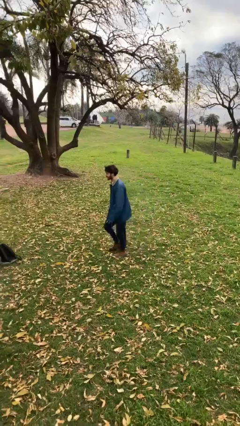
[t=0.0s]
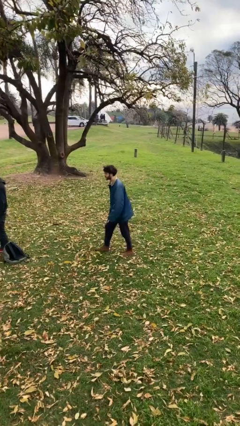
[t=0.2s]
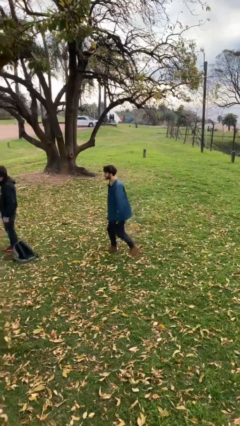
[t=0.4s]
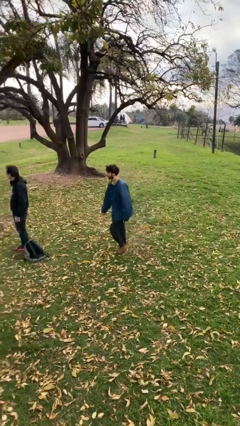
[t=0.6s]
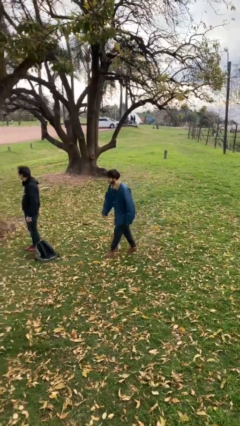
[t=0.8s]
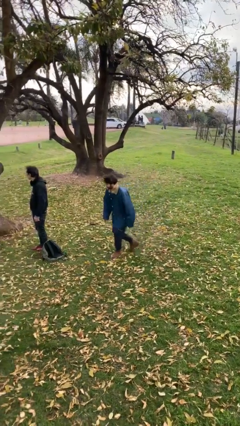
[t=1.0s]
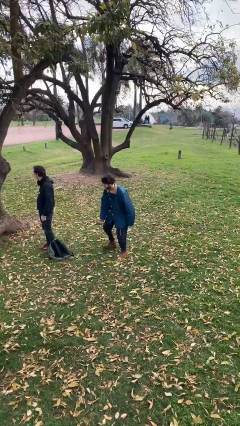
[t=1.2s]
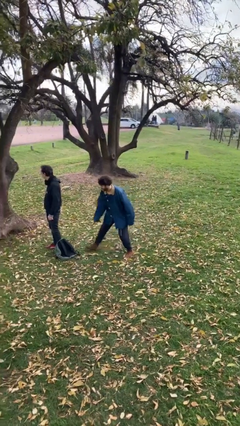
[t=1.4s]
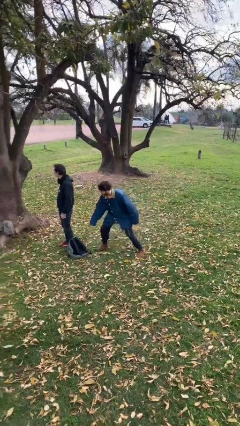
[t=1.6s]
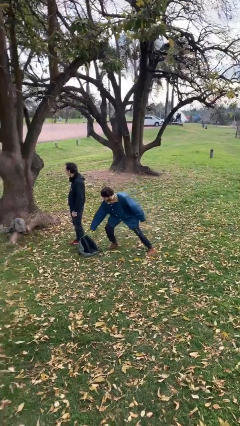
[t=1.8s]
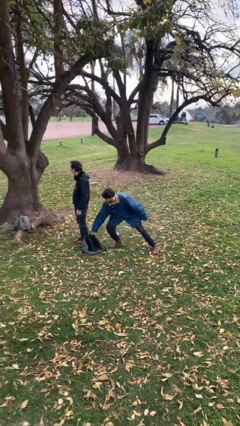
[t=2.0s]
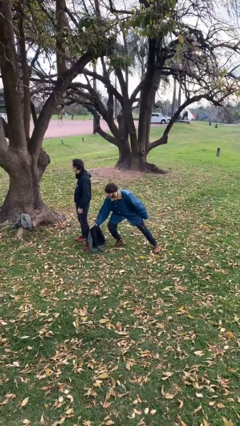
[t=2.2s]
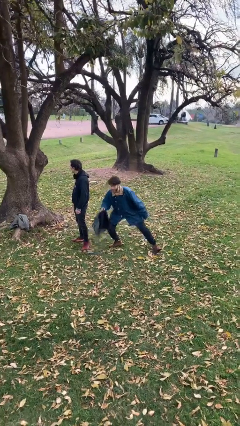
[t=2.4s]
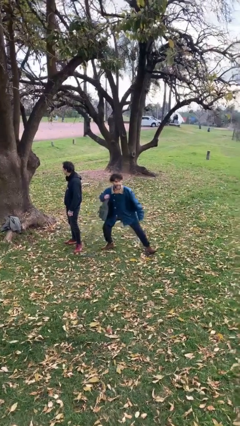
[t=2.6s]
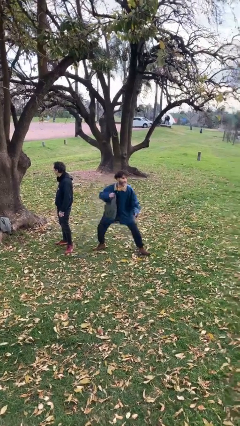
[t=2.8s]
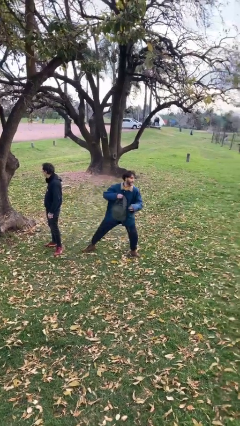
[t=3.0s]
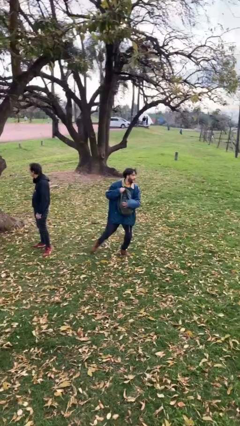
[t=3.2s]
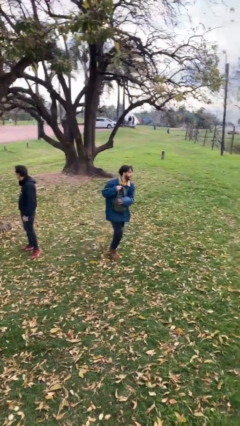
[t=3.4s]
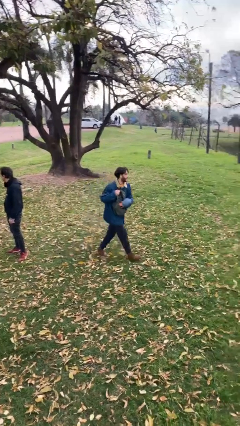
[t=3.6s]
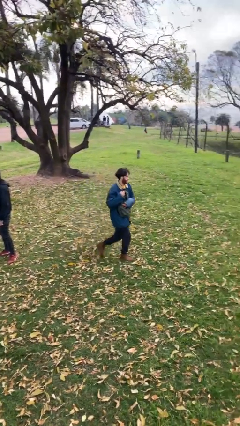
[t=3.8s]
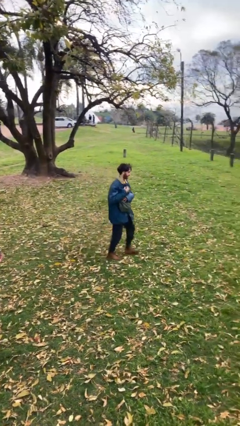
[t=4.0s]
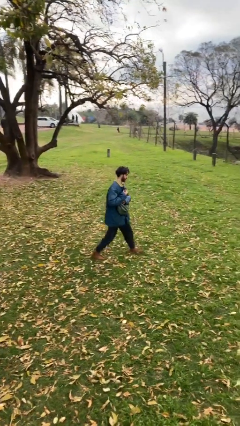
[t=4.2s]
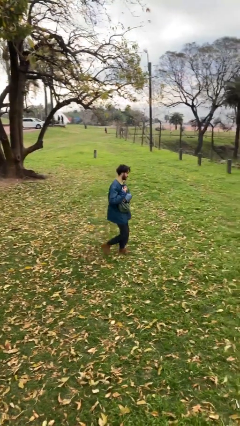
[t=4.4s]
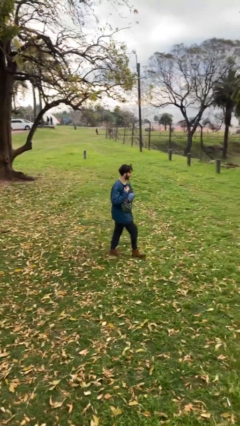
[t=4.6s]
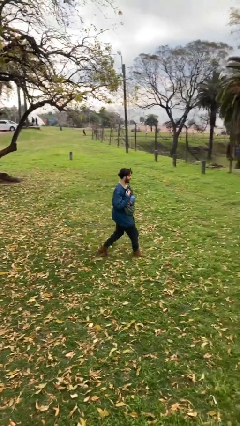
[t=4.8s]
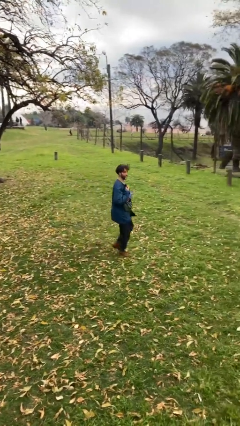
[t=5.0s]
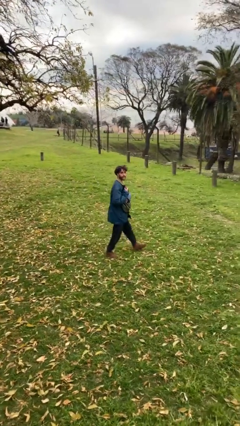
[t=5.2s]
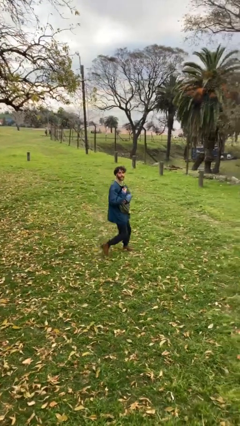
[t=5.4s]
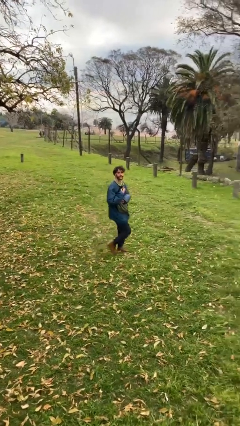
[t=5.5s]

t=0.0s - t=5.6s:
person steals object from person

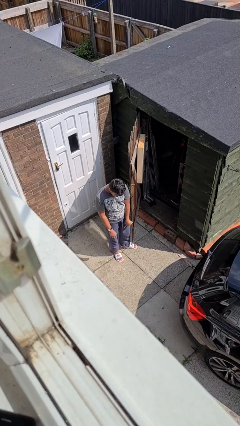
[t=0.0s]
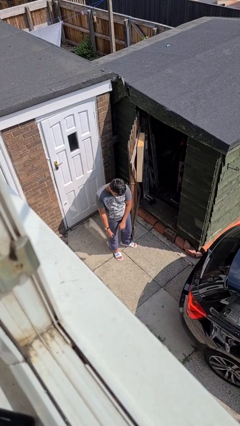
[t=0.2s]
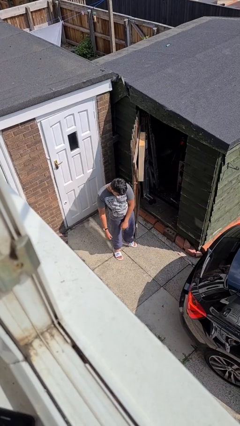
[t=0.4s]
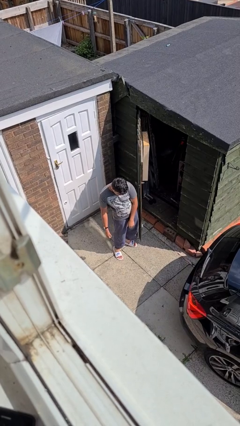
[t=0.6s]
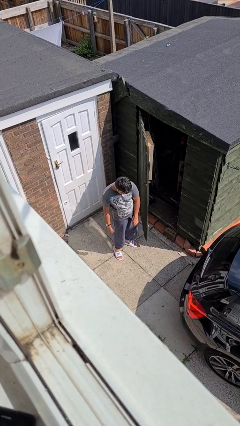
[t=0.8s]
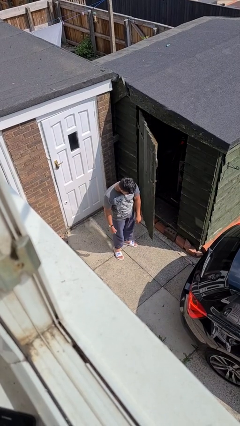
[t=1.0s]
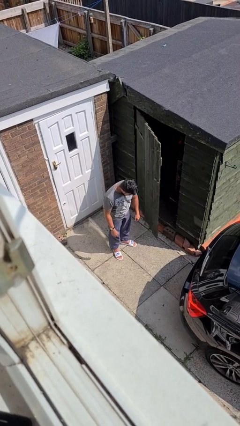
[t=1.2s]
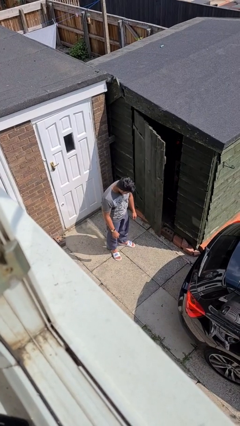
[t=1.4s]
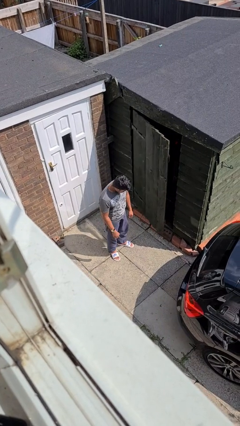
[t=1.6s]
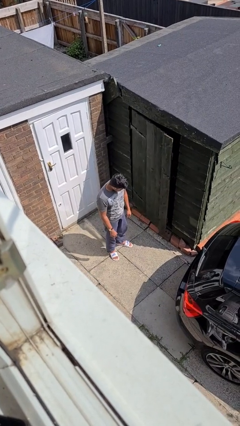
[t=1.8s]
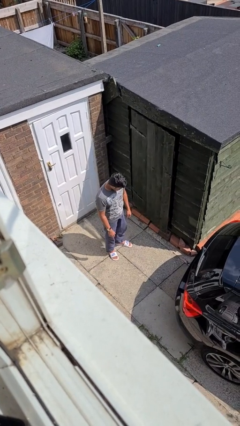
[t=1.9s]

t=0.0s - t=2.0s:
person closes door with hip

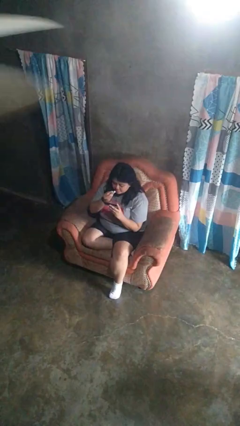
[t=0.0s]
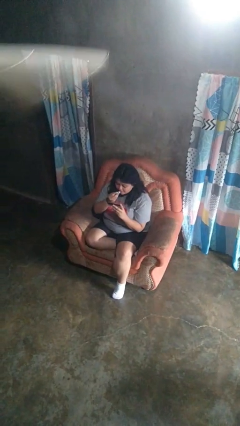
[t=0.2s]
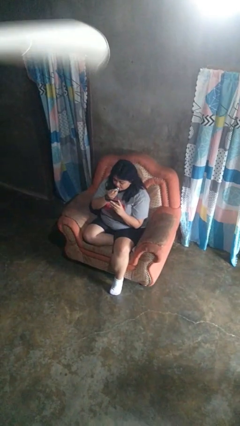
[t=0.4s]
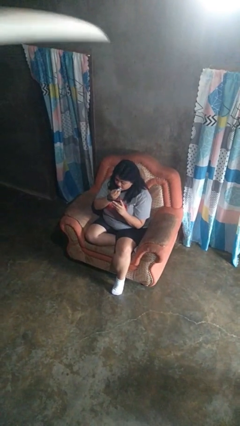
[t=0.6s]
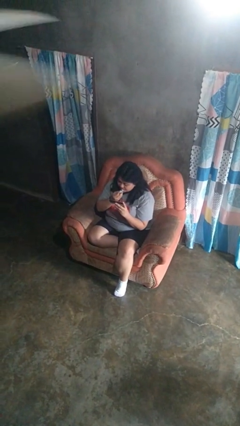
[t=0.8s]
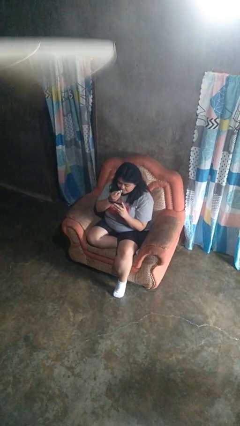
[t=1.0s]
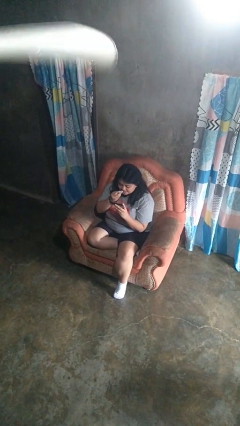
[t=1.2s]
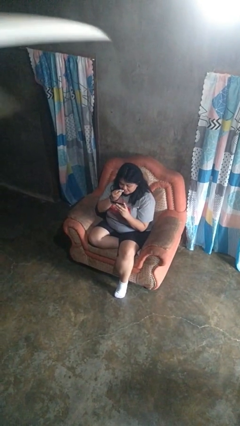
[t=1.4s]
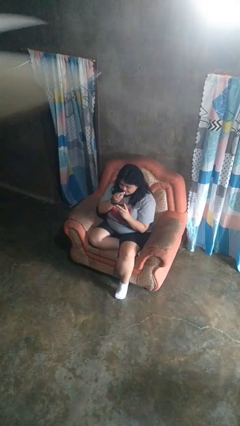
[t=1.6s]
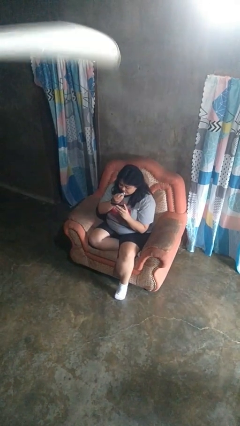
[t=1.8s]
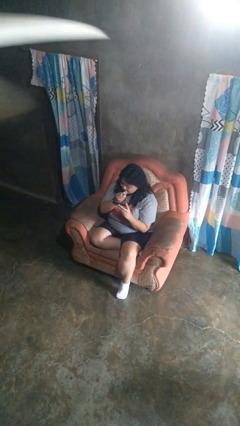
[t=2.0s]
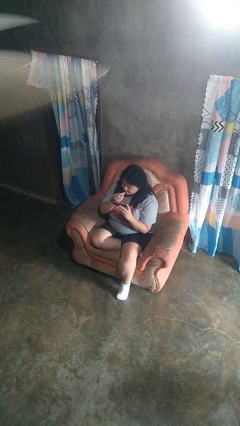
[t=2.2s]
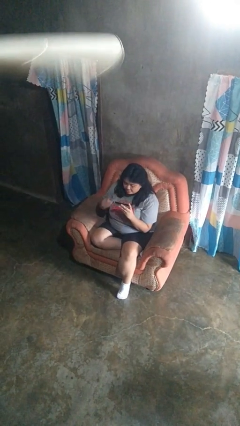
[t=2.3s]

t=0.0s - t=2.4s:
person applies lip makeup

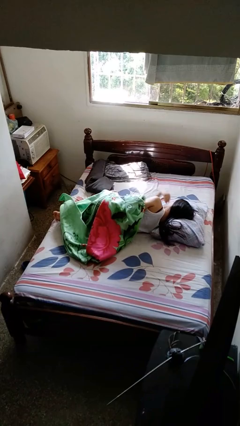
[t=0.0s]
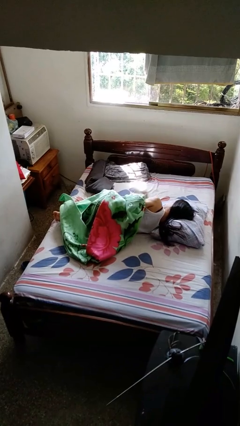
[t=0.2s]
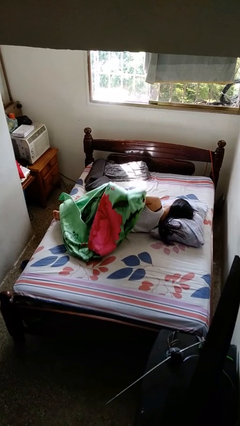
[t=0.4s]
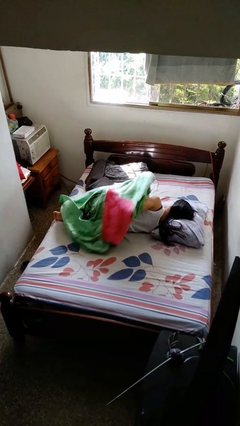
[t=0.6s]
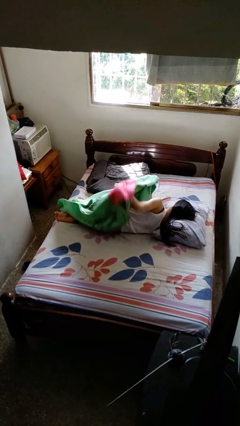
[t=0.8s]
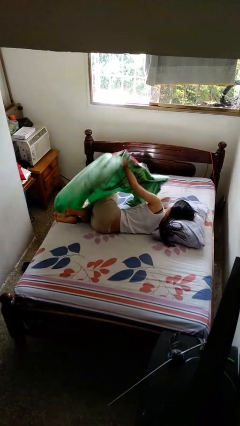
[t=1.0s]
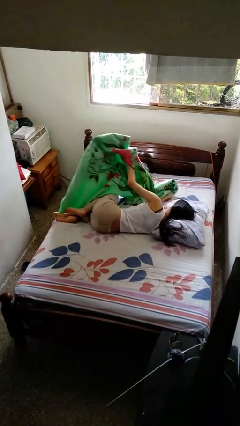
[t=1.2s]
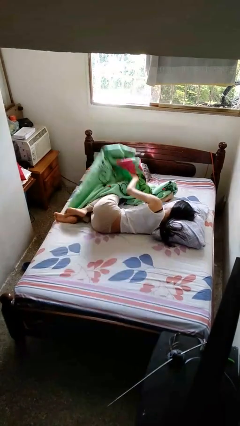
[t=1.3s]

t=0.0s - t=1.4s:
person uncovers with bedsheets

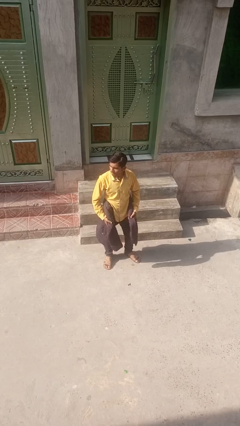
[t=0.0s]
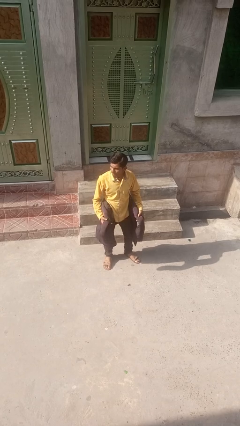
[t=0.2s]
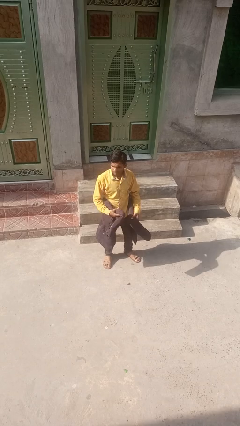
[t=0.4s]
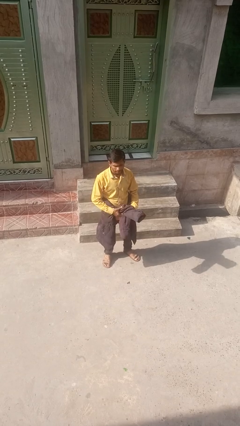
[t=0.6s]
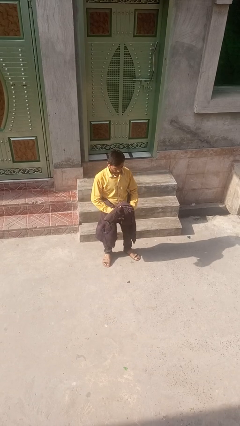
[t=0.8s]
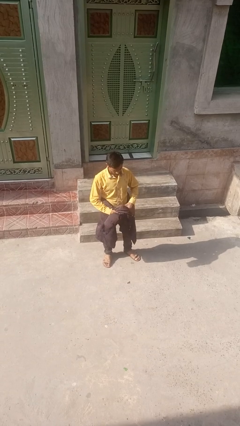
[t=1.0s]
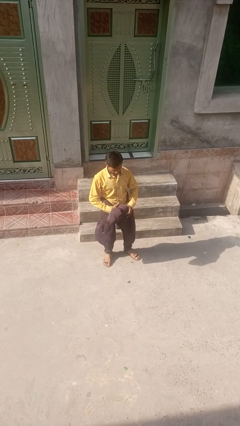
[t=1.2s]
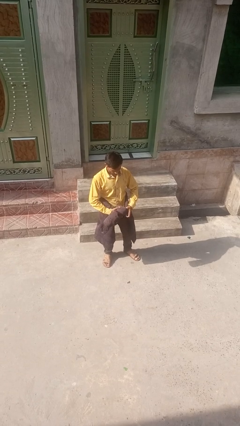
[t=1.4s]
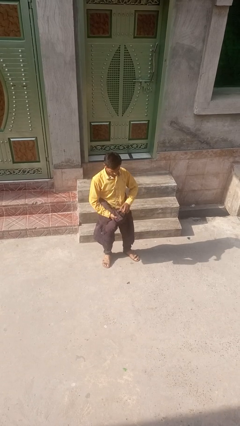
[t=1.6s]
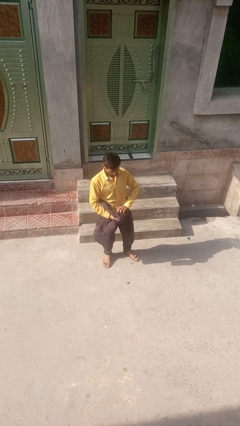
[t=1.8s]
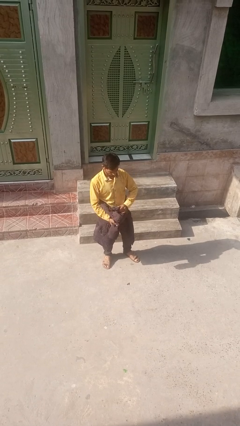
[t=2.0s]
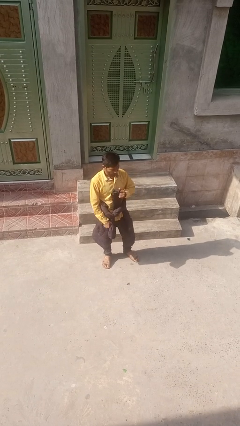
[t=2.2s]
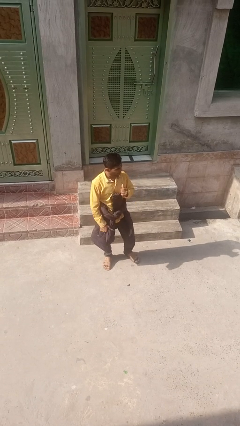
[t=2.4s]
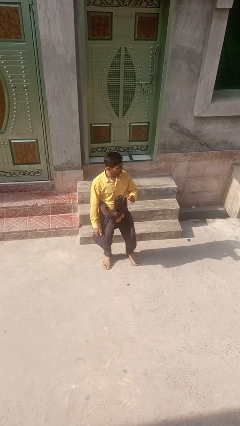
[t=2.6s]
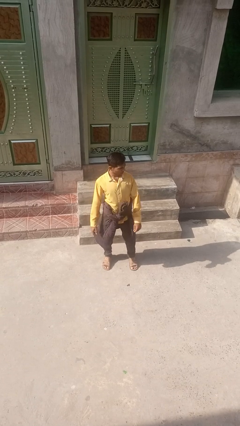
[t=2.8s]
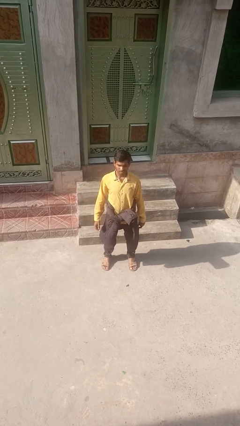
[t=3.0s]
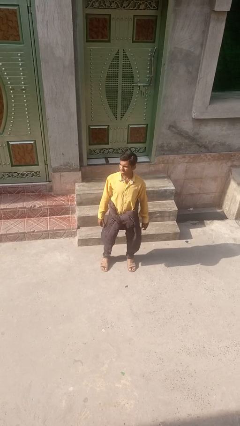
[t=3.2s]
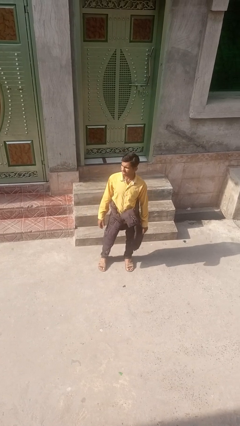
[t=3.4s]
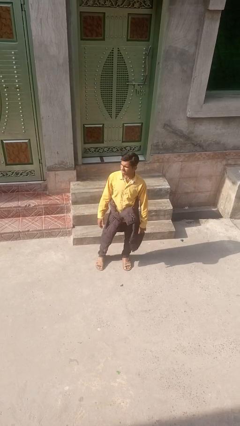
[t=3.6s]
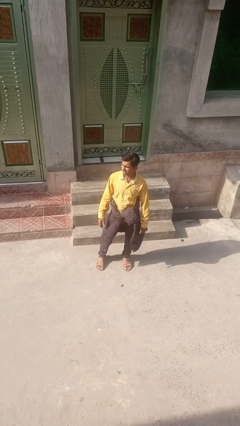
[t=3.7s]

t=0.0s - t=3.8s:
person ties jacket around waist

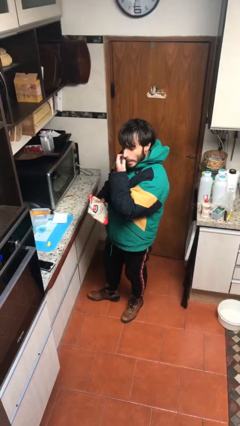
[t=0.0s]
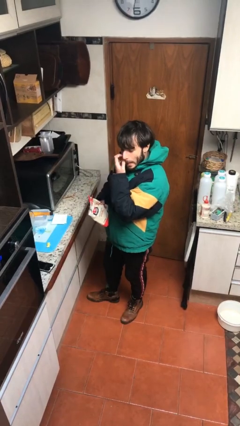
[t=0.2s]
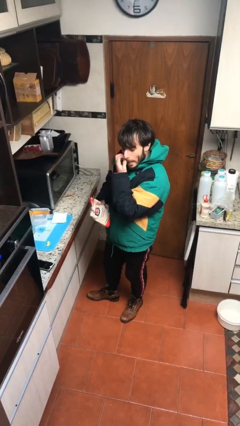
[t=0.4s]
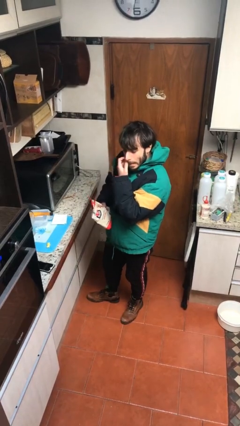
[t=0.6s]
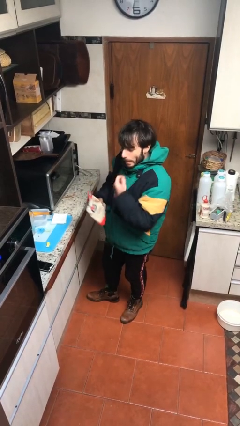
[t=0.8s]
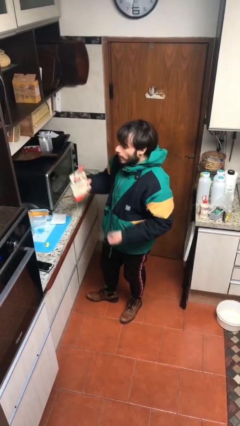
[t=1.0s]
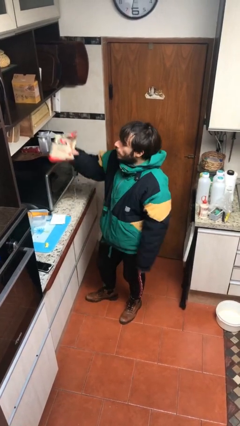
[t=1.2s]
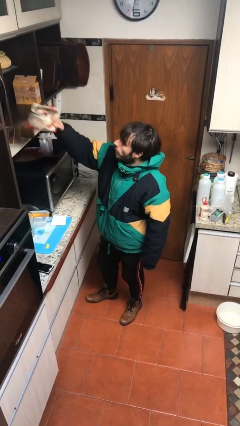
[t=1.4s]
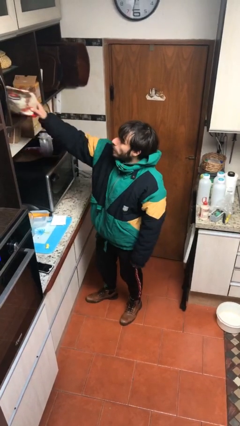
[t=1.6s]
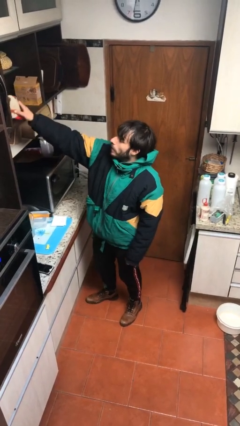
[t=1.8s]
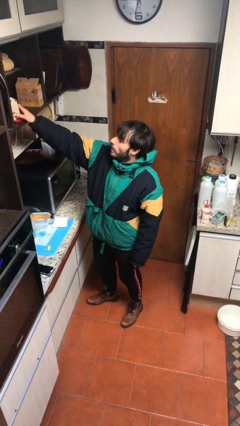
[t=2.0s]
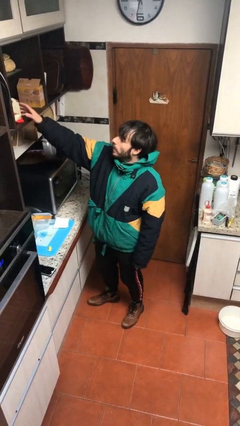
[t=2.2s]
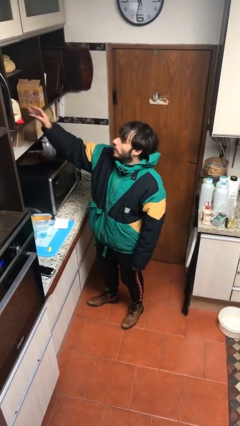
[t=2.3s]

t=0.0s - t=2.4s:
person puts down object into cabinet
